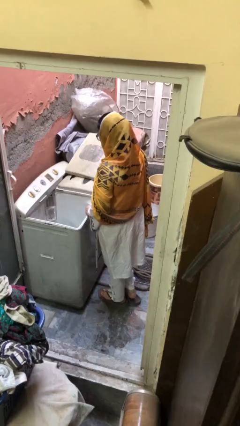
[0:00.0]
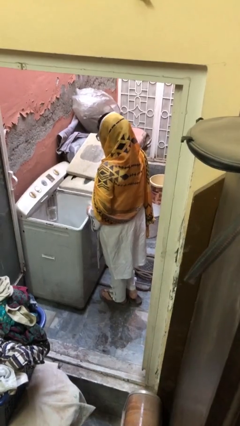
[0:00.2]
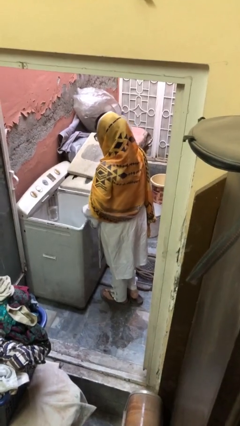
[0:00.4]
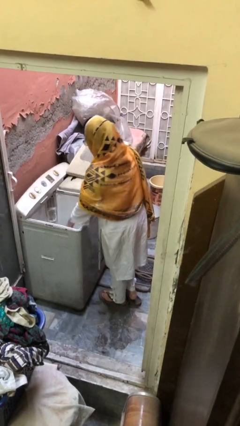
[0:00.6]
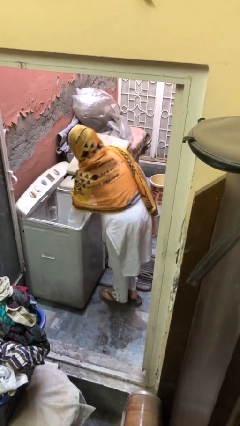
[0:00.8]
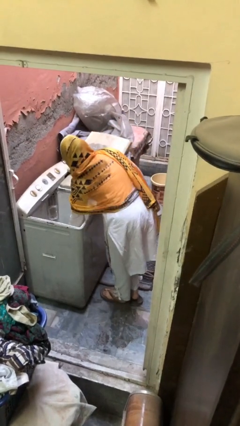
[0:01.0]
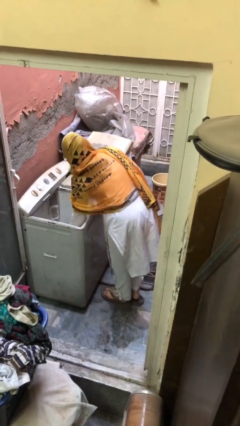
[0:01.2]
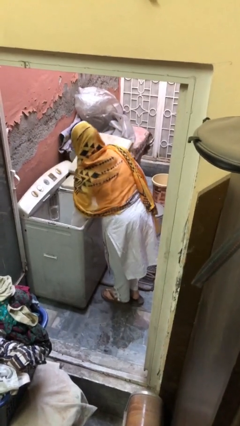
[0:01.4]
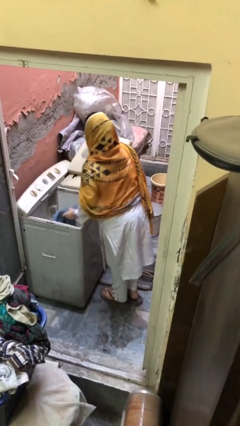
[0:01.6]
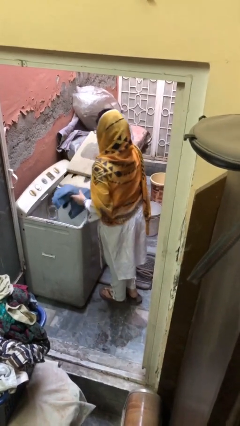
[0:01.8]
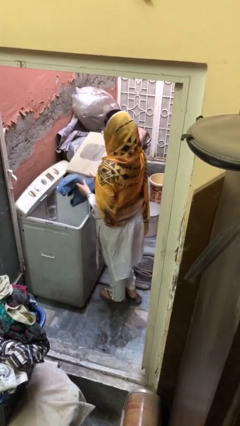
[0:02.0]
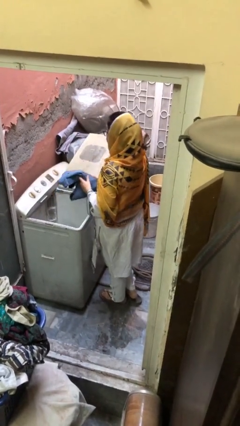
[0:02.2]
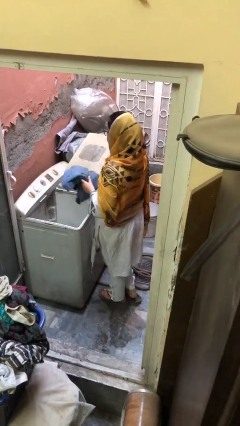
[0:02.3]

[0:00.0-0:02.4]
person unloads clotheswasher

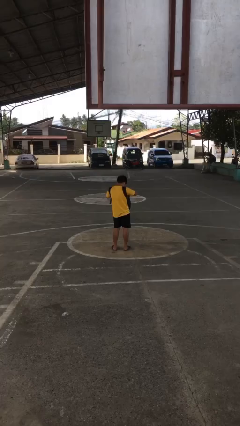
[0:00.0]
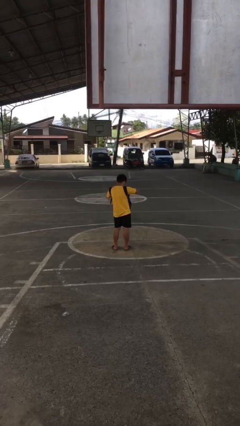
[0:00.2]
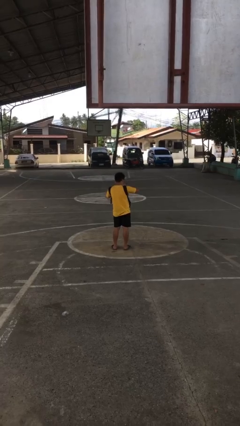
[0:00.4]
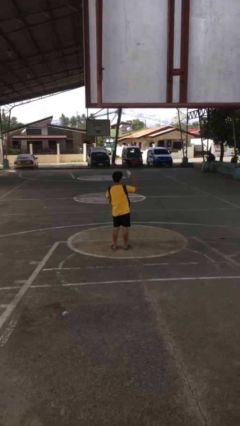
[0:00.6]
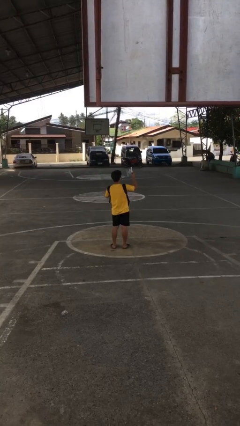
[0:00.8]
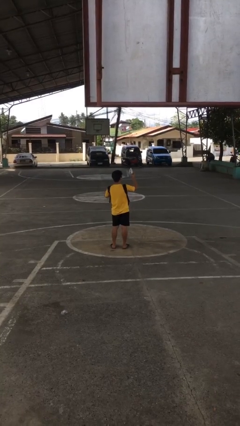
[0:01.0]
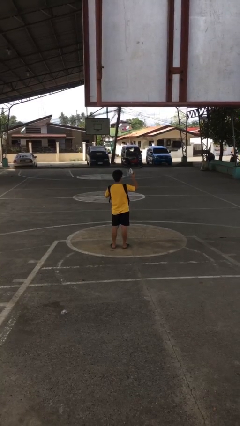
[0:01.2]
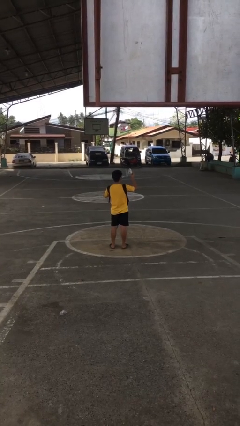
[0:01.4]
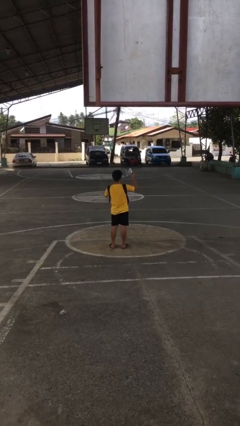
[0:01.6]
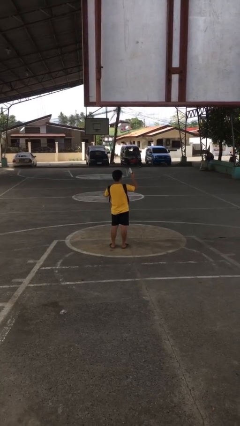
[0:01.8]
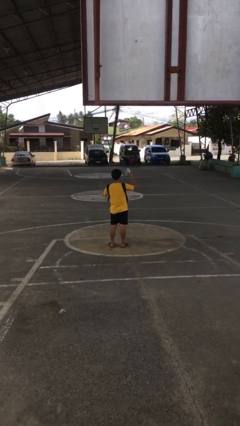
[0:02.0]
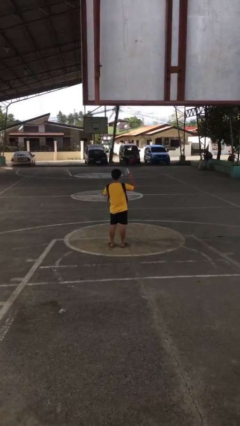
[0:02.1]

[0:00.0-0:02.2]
person takes object from backpack

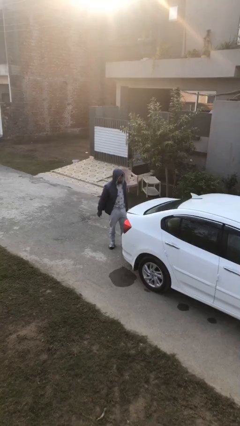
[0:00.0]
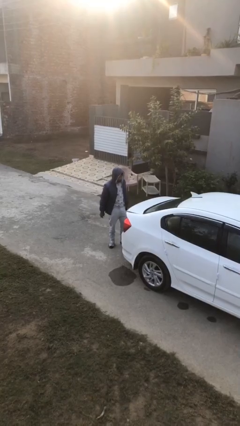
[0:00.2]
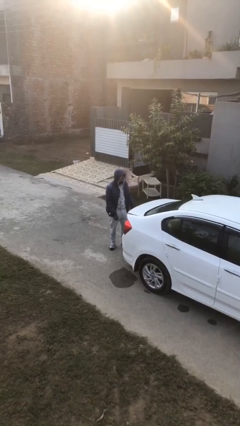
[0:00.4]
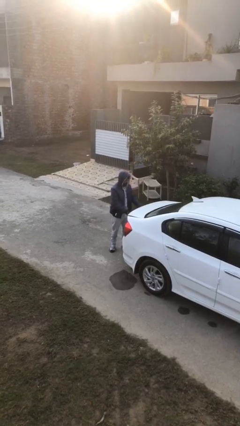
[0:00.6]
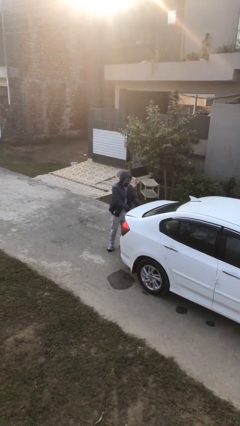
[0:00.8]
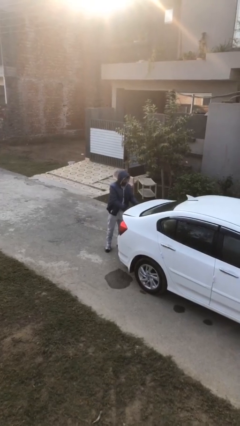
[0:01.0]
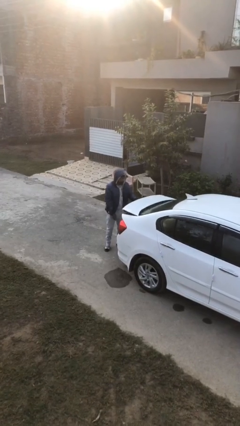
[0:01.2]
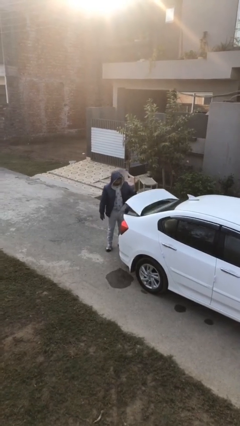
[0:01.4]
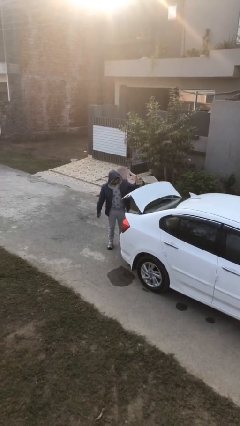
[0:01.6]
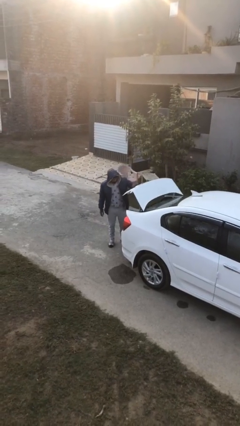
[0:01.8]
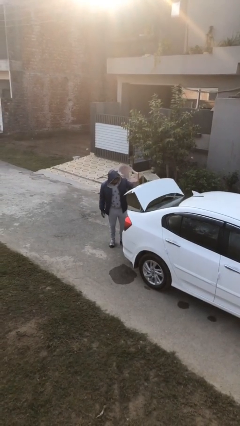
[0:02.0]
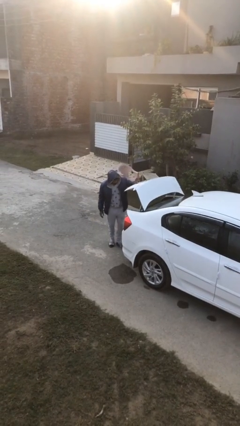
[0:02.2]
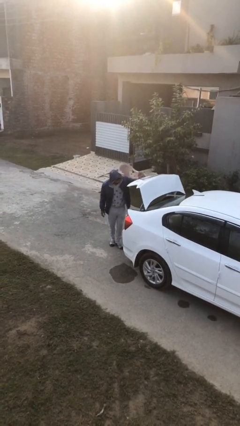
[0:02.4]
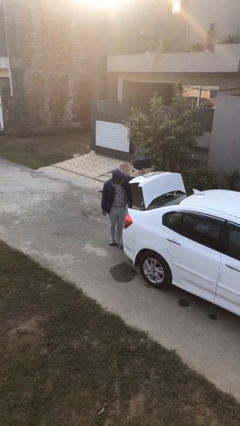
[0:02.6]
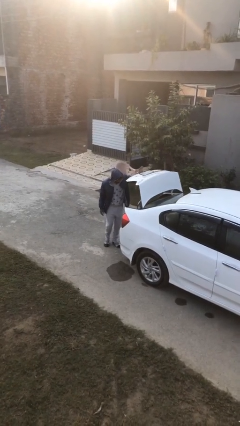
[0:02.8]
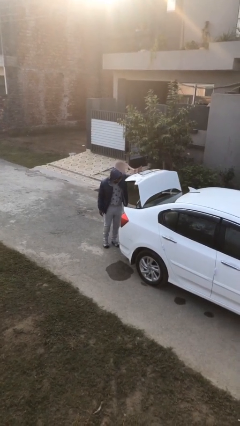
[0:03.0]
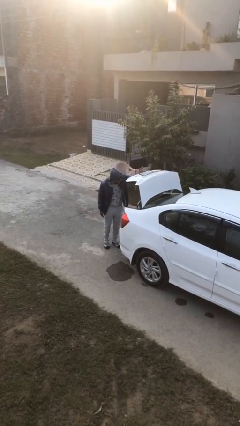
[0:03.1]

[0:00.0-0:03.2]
person opens car trunk

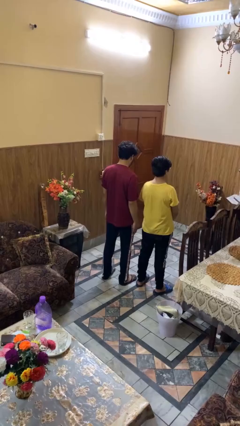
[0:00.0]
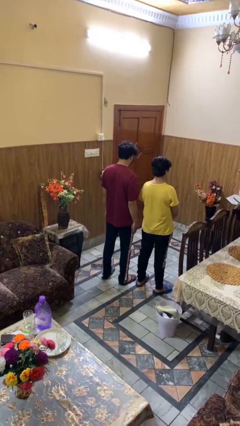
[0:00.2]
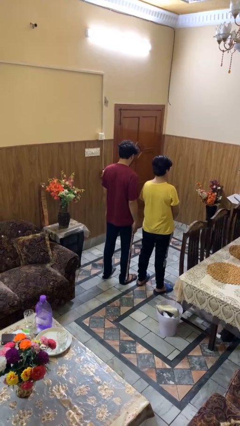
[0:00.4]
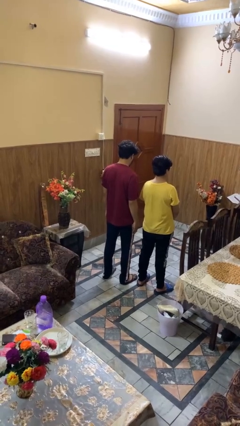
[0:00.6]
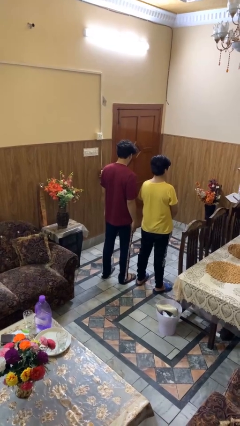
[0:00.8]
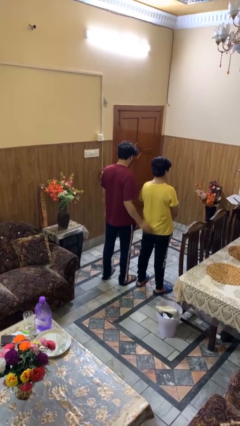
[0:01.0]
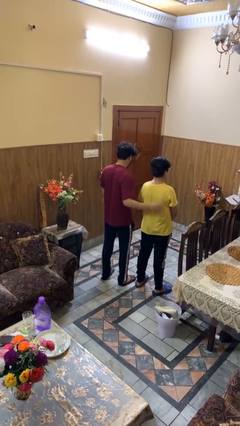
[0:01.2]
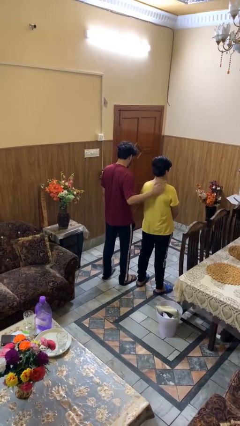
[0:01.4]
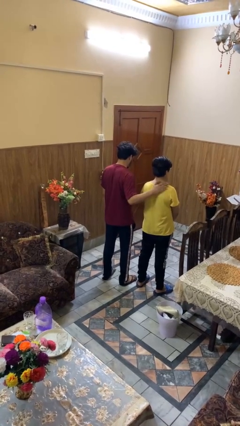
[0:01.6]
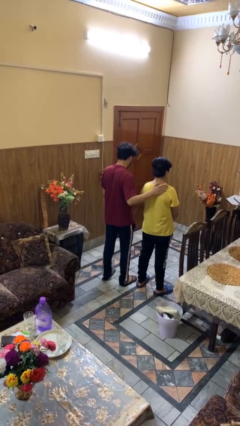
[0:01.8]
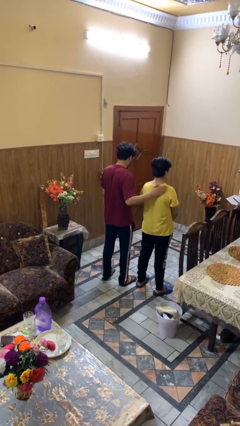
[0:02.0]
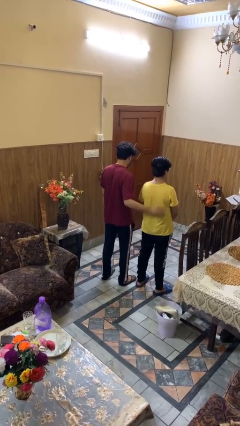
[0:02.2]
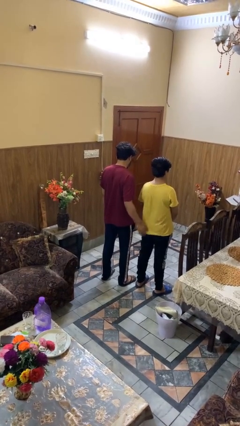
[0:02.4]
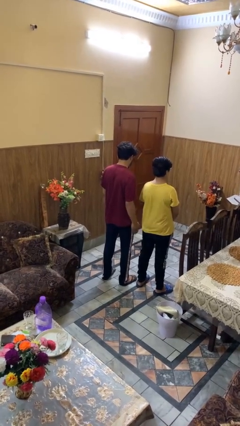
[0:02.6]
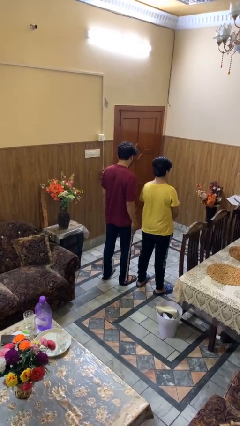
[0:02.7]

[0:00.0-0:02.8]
person touches back of person

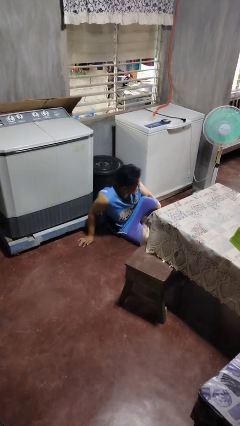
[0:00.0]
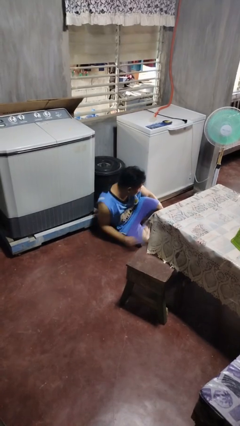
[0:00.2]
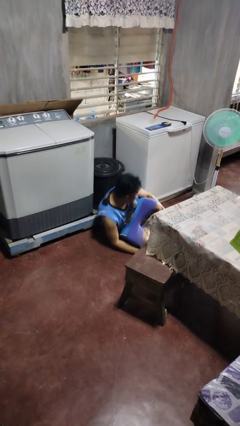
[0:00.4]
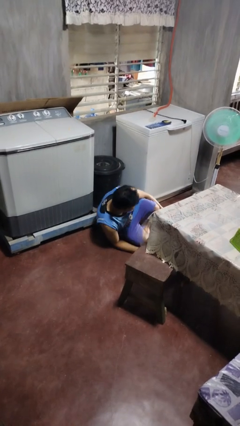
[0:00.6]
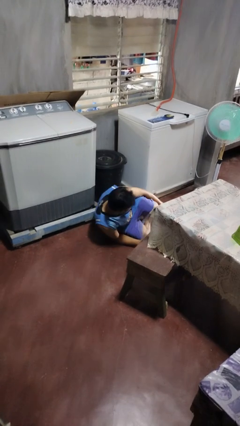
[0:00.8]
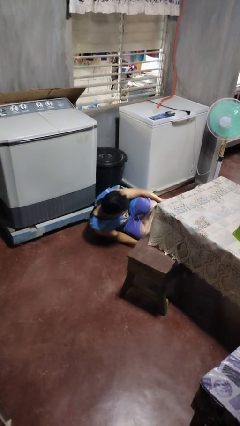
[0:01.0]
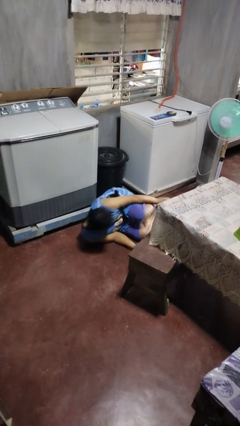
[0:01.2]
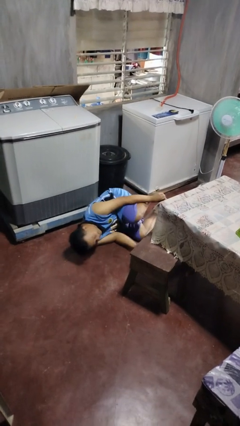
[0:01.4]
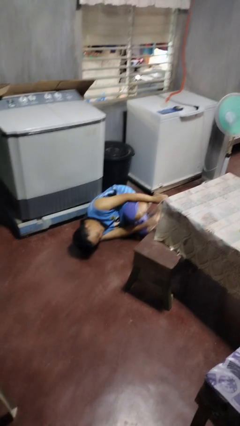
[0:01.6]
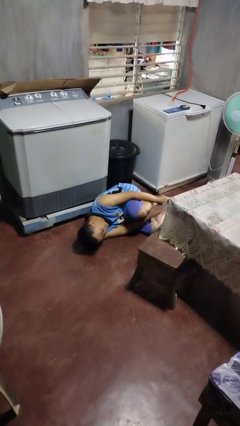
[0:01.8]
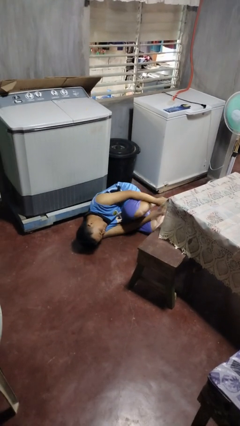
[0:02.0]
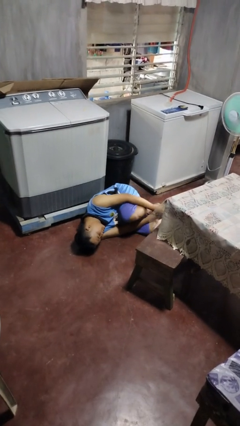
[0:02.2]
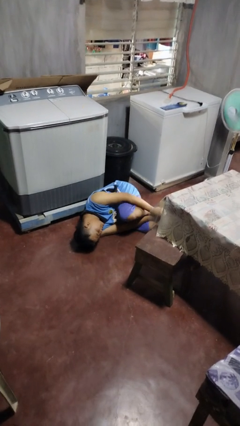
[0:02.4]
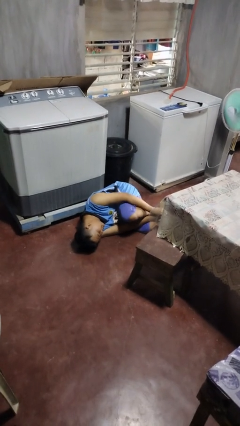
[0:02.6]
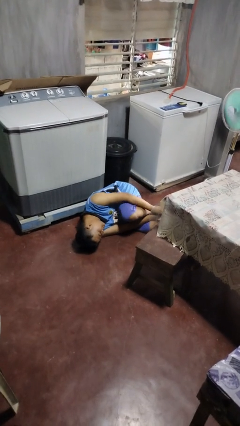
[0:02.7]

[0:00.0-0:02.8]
person lies down on floor

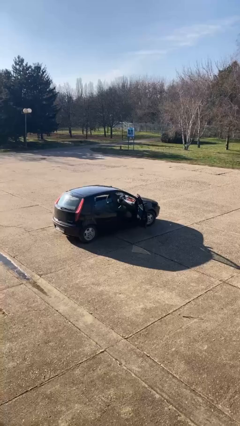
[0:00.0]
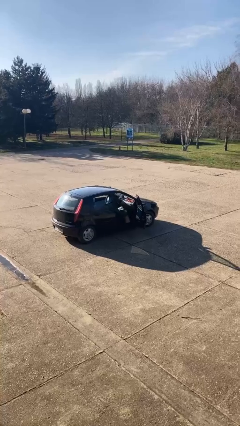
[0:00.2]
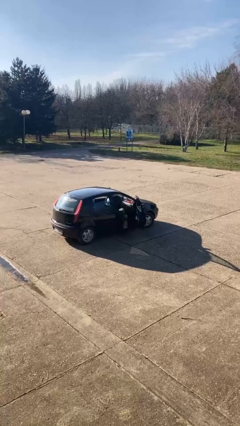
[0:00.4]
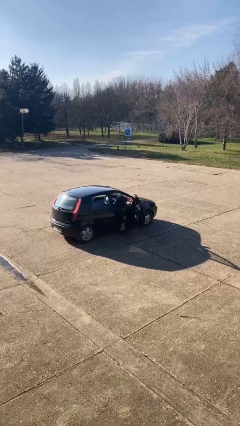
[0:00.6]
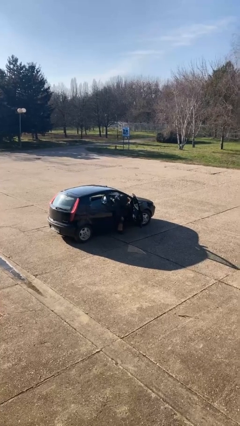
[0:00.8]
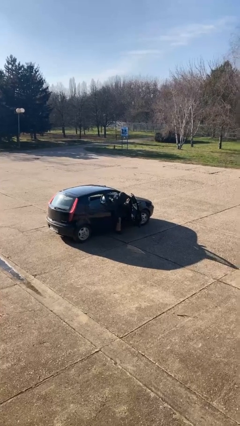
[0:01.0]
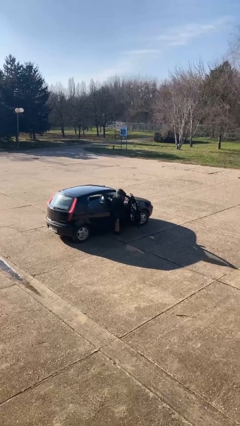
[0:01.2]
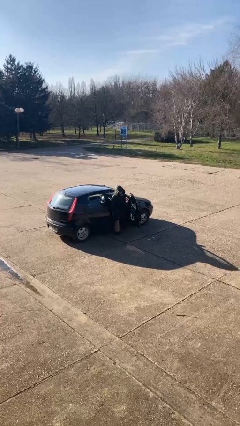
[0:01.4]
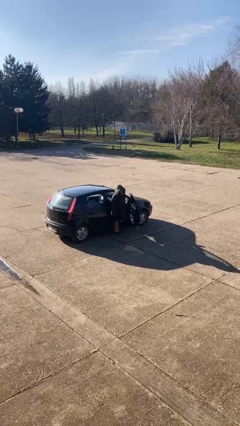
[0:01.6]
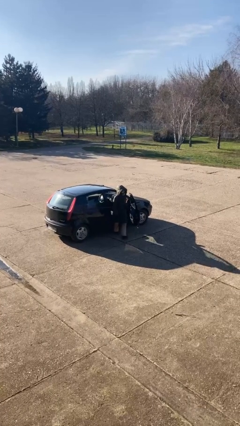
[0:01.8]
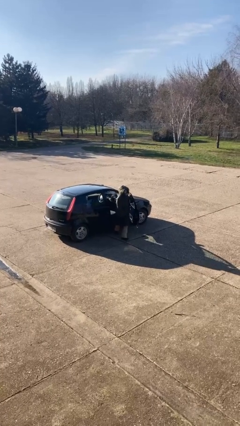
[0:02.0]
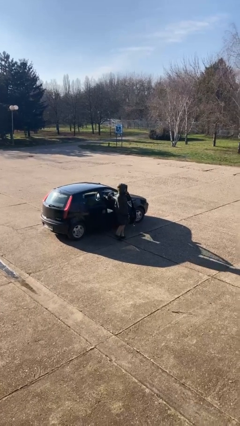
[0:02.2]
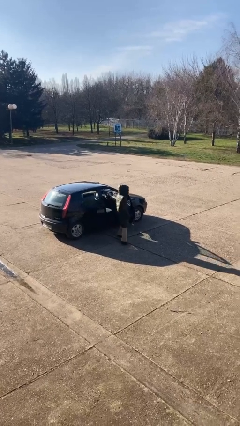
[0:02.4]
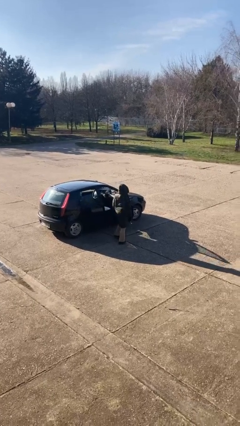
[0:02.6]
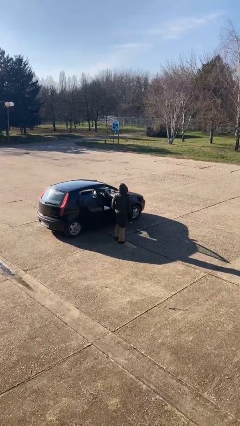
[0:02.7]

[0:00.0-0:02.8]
person exits car

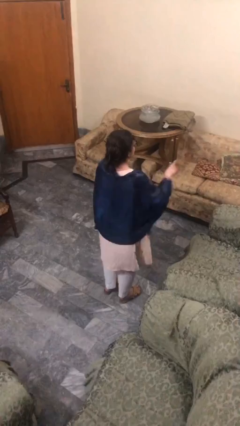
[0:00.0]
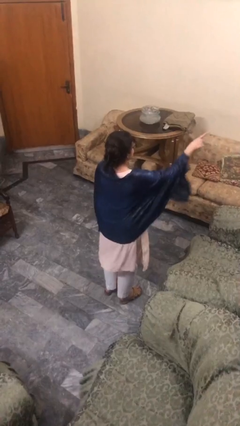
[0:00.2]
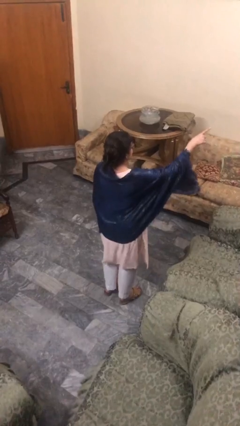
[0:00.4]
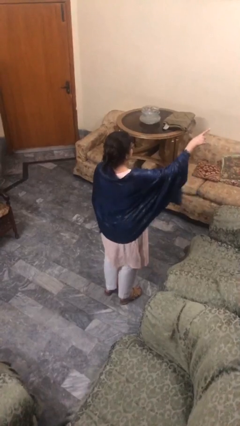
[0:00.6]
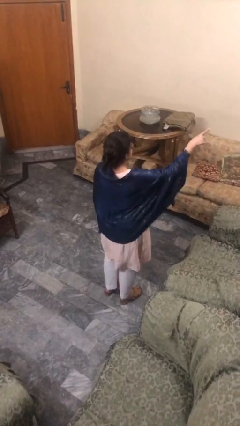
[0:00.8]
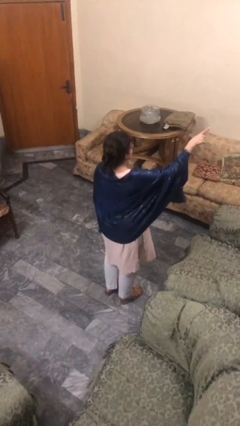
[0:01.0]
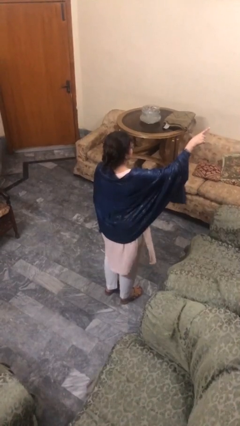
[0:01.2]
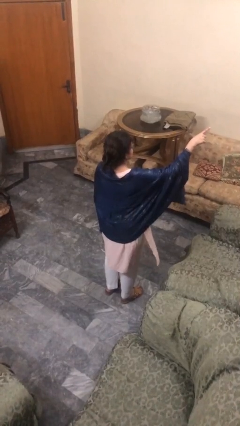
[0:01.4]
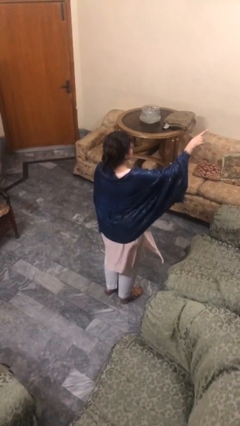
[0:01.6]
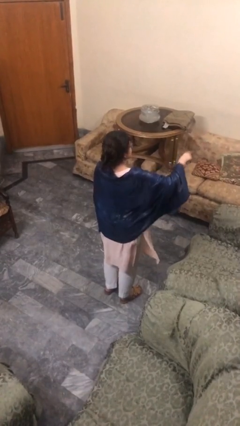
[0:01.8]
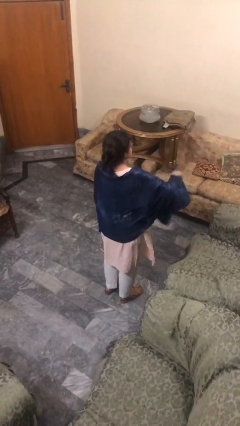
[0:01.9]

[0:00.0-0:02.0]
person points at person
